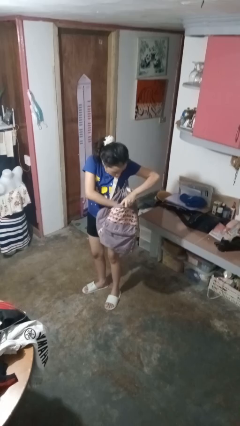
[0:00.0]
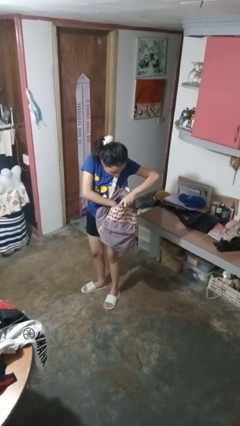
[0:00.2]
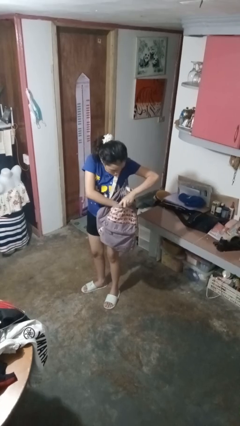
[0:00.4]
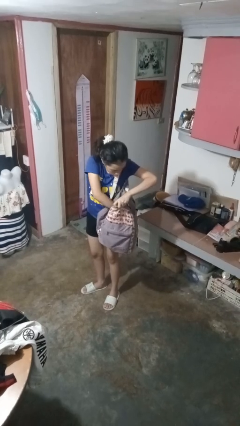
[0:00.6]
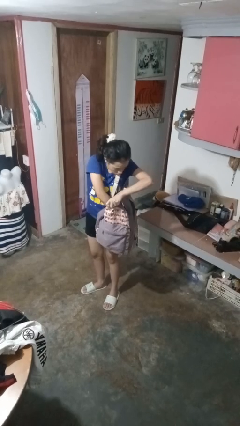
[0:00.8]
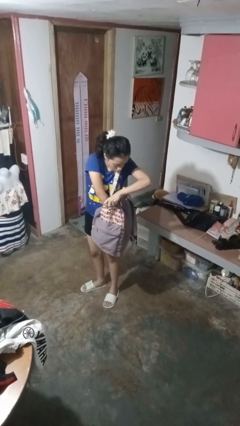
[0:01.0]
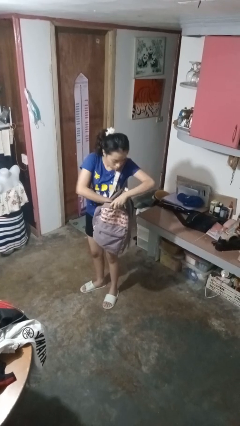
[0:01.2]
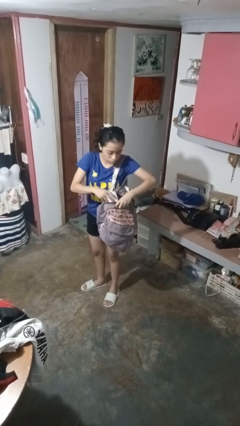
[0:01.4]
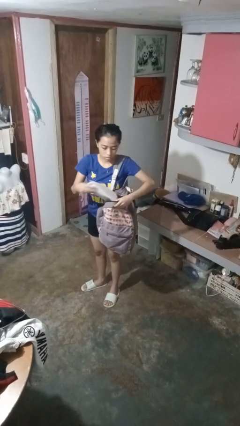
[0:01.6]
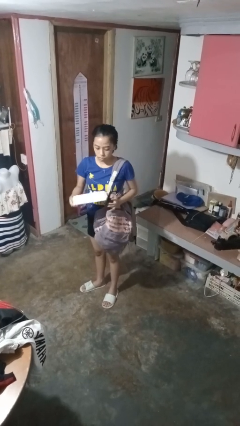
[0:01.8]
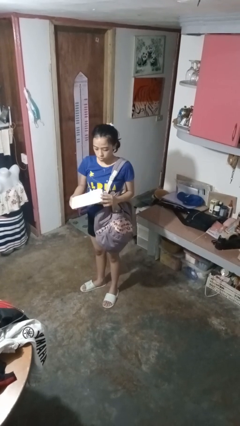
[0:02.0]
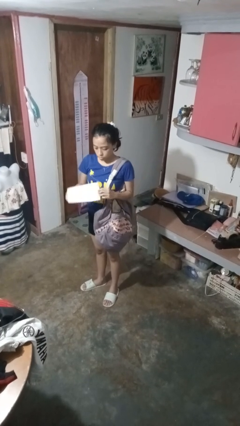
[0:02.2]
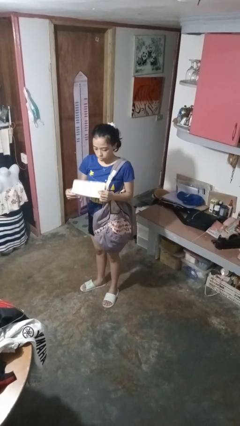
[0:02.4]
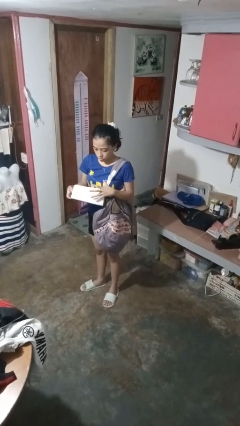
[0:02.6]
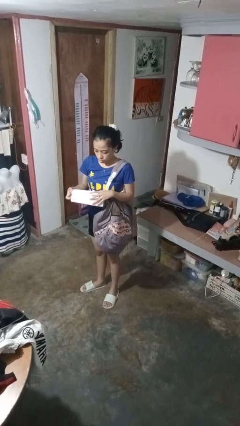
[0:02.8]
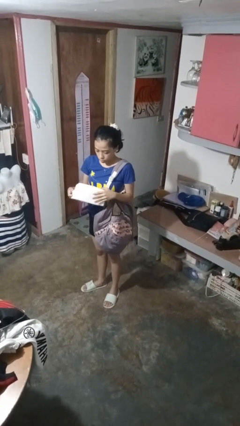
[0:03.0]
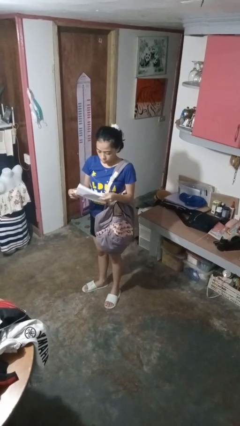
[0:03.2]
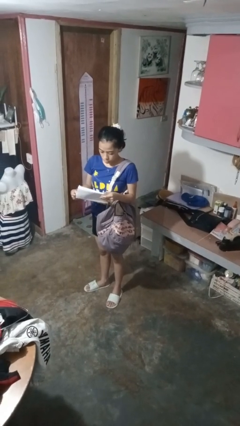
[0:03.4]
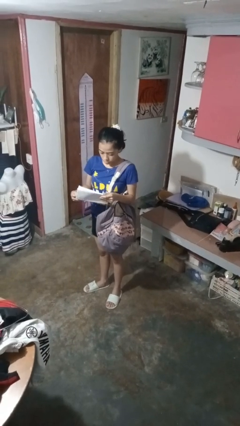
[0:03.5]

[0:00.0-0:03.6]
person takes object from backpack

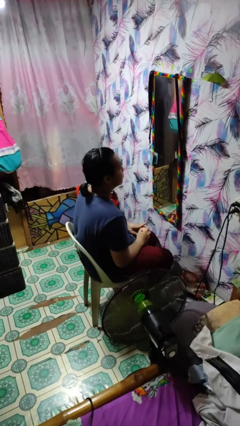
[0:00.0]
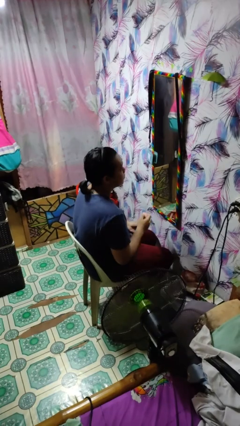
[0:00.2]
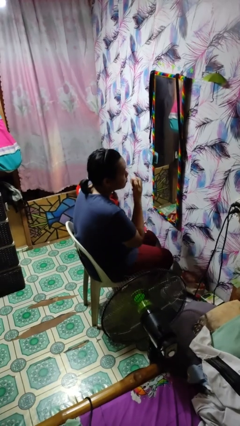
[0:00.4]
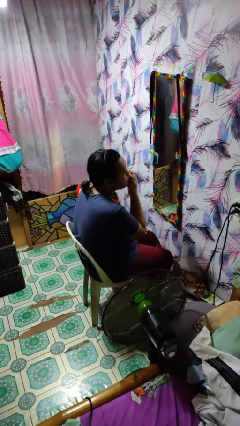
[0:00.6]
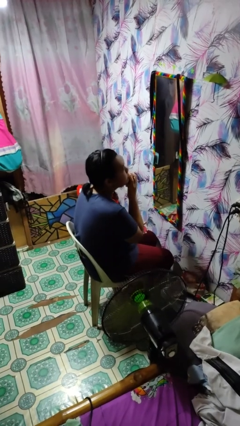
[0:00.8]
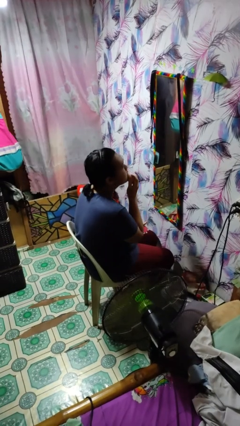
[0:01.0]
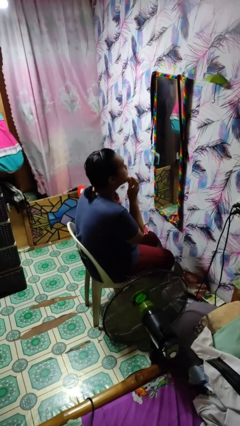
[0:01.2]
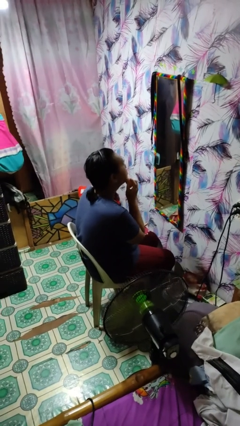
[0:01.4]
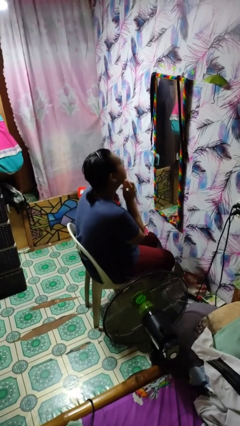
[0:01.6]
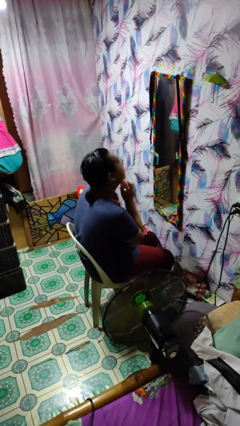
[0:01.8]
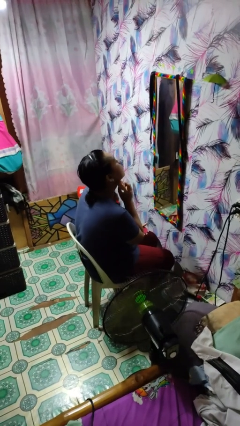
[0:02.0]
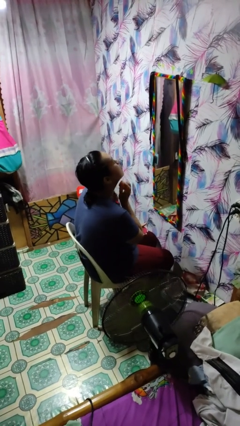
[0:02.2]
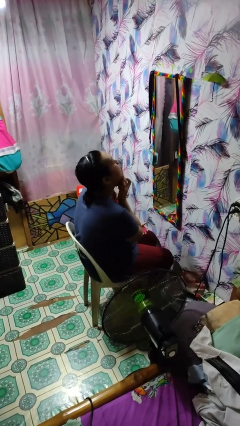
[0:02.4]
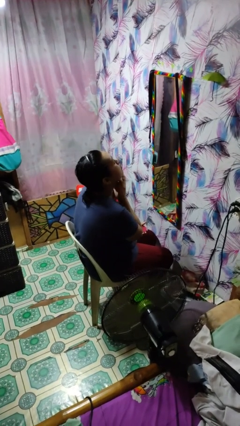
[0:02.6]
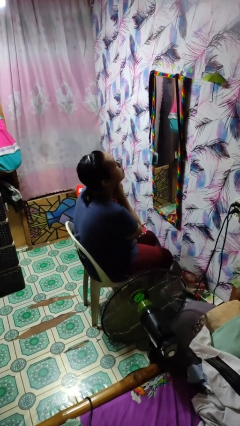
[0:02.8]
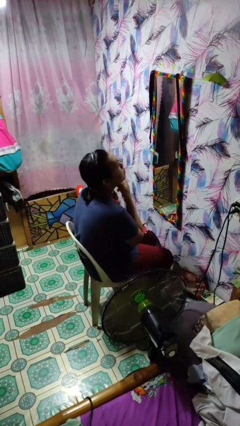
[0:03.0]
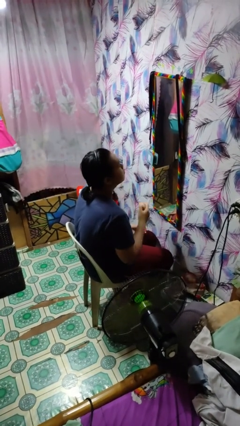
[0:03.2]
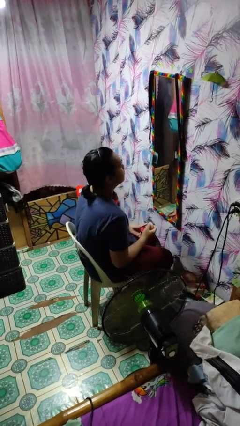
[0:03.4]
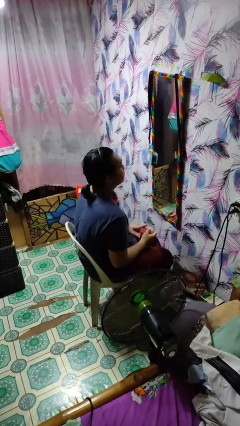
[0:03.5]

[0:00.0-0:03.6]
person applies foundation makeup

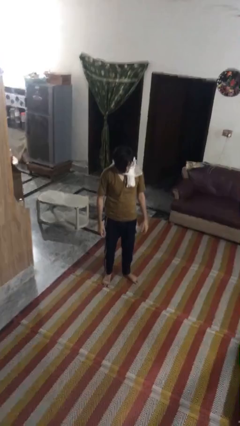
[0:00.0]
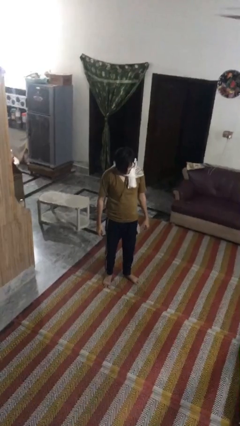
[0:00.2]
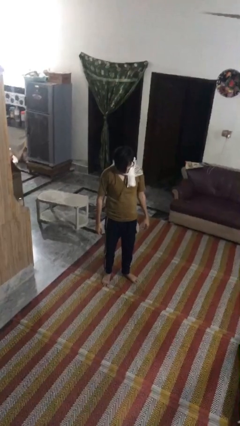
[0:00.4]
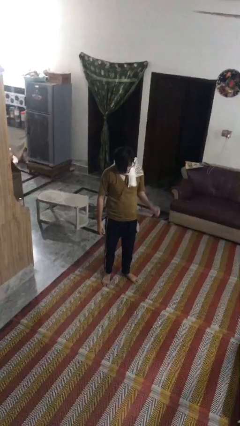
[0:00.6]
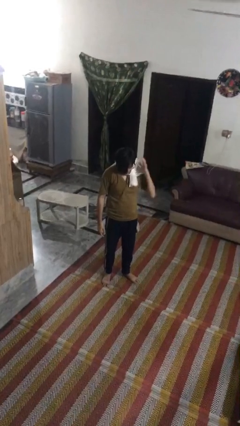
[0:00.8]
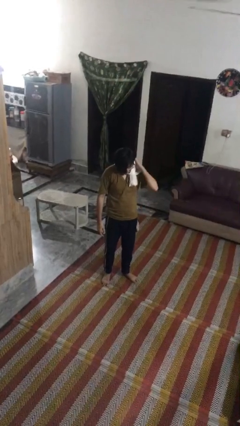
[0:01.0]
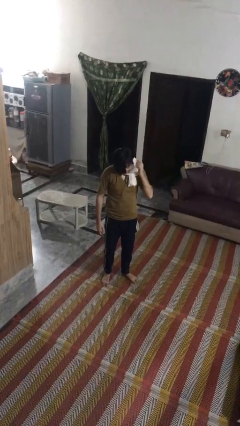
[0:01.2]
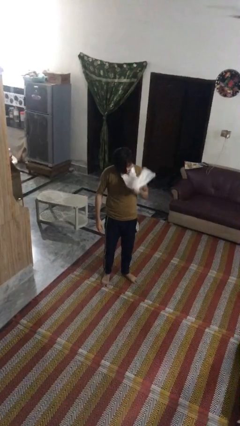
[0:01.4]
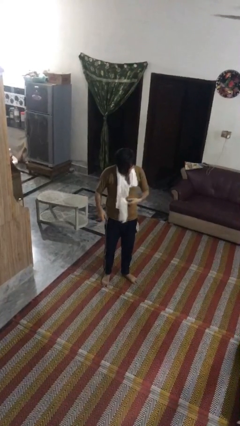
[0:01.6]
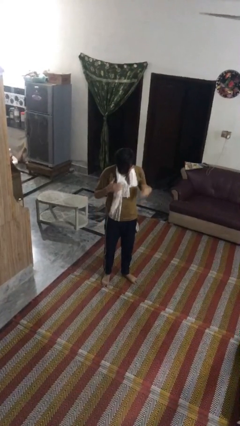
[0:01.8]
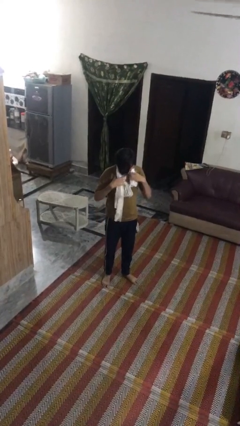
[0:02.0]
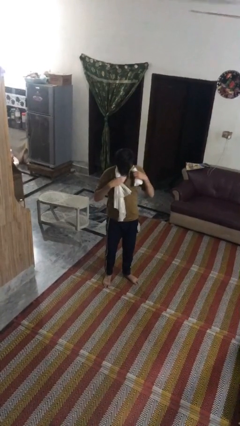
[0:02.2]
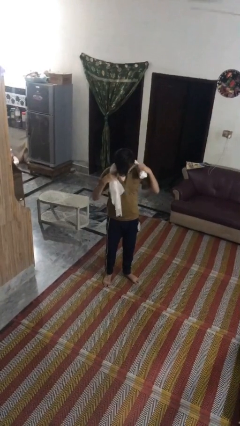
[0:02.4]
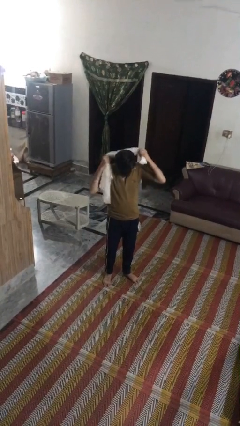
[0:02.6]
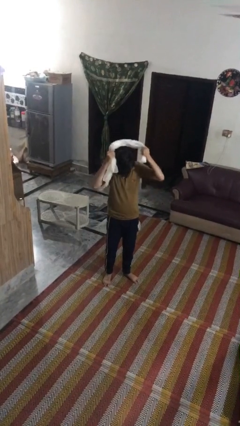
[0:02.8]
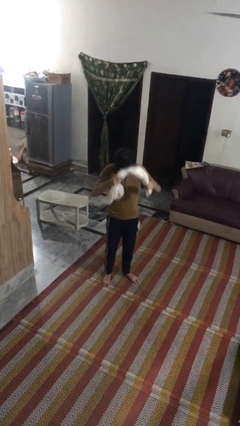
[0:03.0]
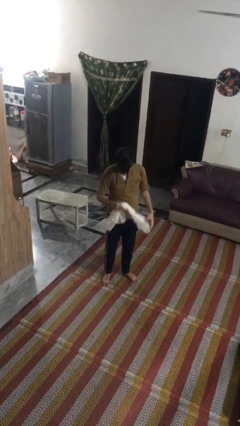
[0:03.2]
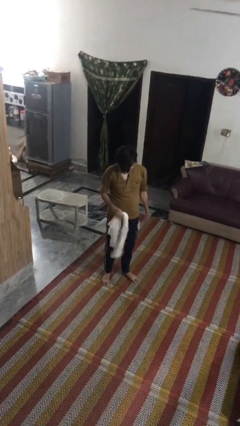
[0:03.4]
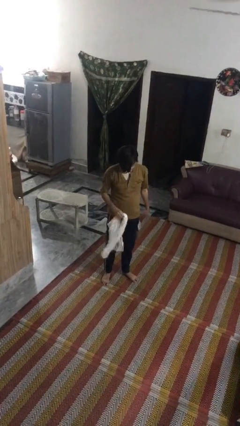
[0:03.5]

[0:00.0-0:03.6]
person takes off scarf

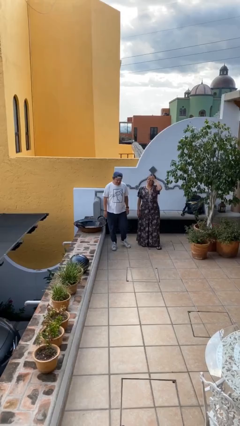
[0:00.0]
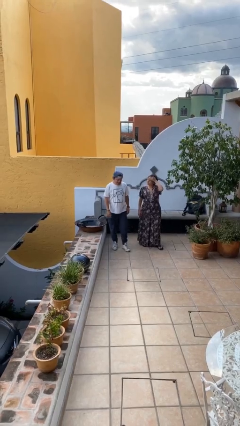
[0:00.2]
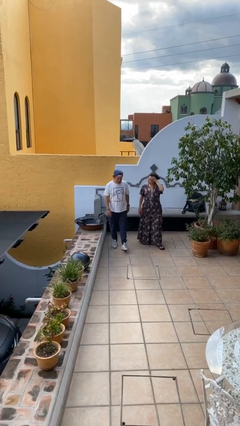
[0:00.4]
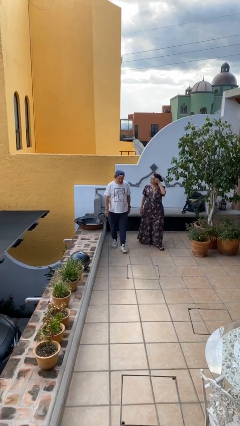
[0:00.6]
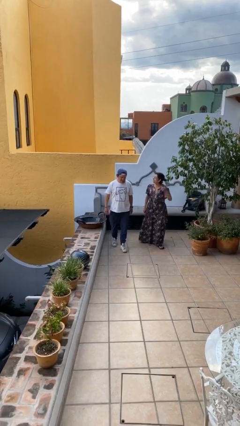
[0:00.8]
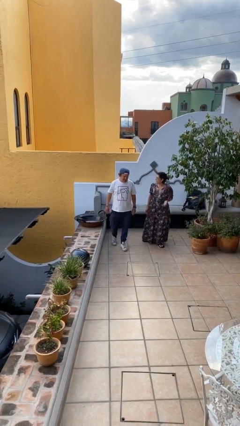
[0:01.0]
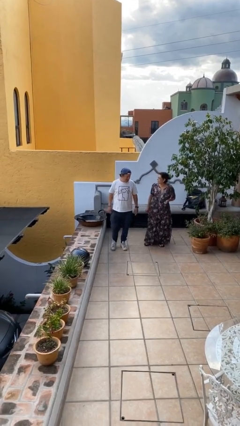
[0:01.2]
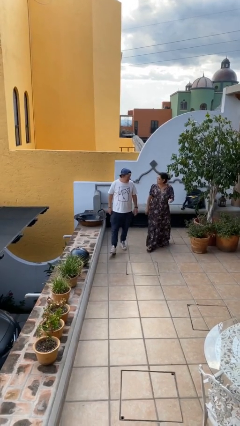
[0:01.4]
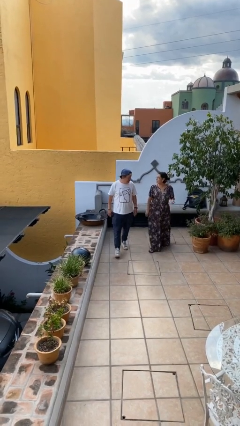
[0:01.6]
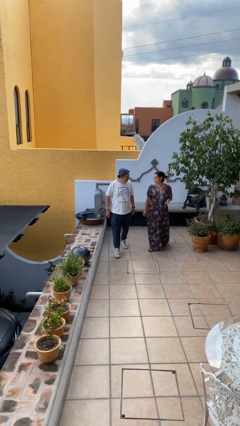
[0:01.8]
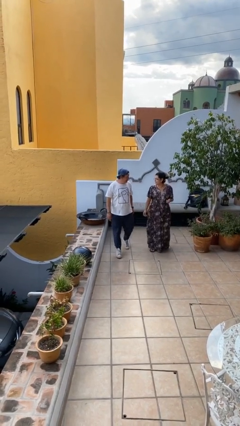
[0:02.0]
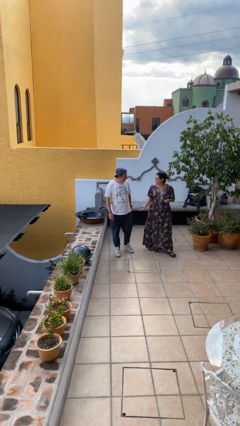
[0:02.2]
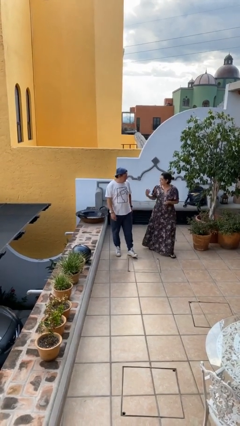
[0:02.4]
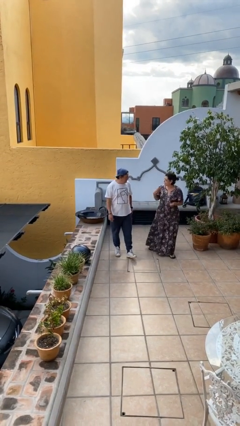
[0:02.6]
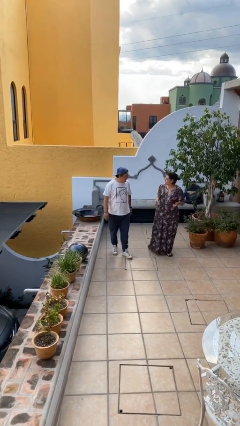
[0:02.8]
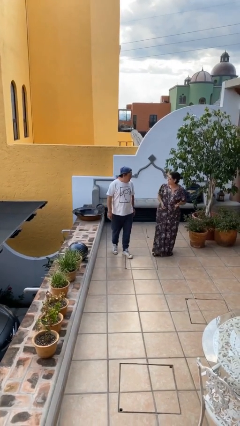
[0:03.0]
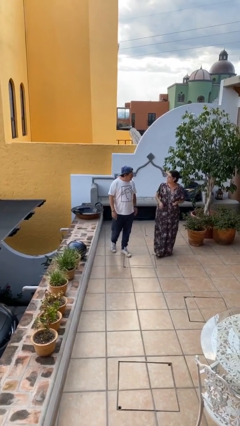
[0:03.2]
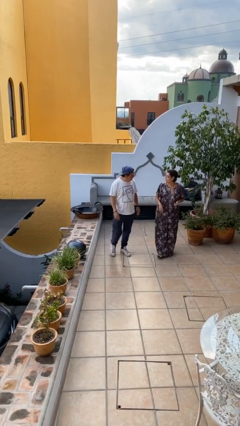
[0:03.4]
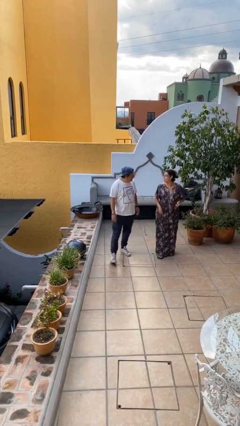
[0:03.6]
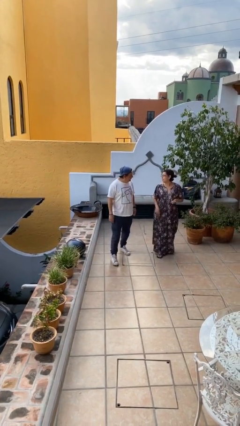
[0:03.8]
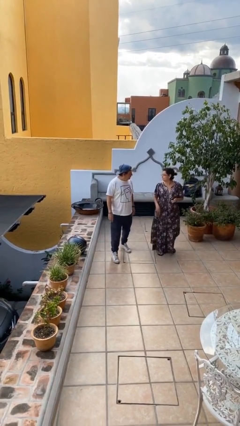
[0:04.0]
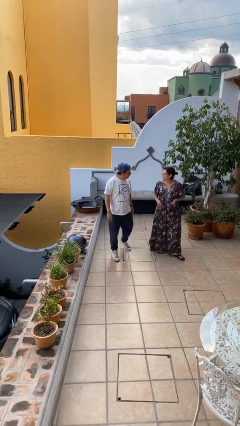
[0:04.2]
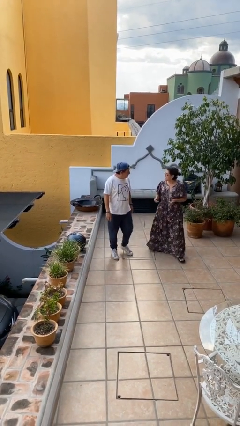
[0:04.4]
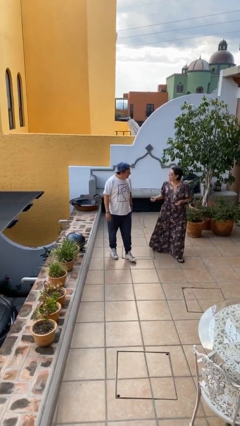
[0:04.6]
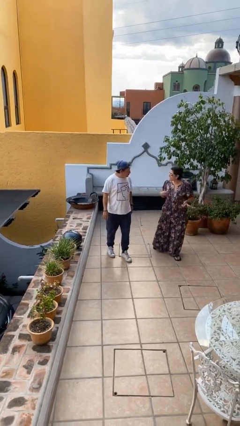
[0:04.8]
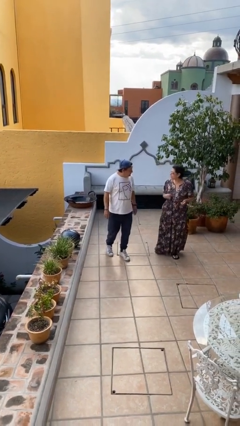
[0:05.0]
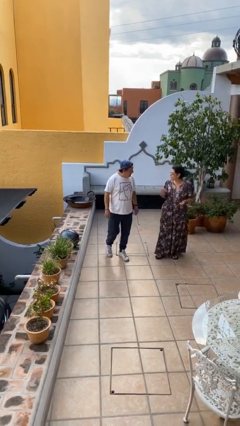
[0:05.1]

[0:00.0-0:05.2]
person talks to person

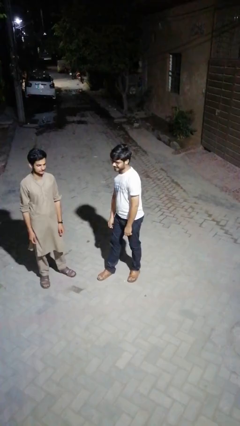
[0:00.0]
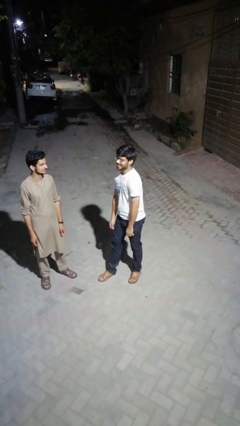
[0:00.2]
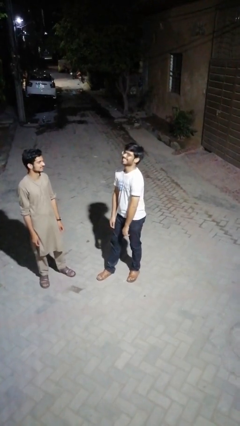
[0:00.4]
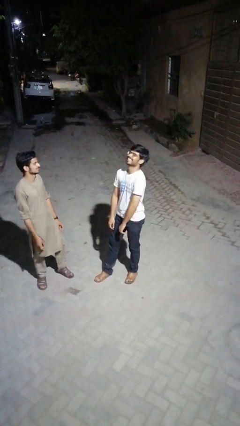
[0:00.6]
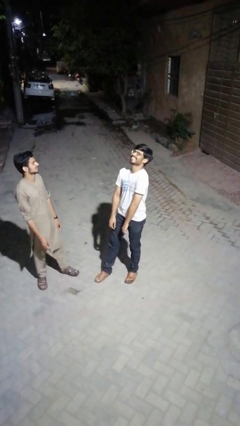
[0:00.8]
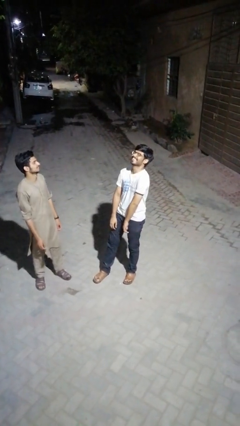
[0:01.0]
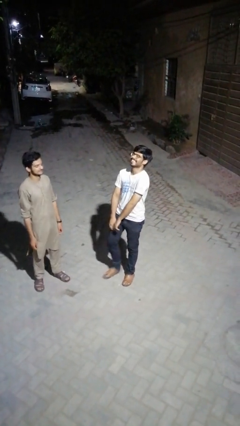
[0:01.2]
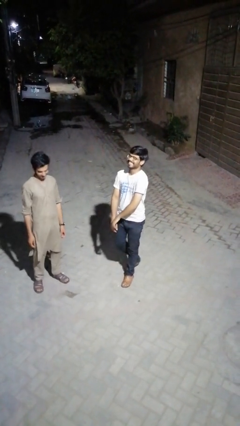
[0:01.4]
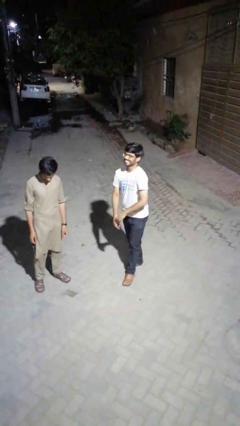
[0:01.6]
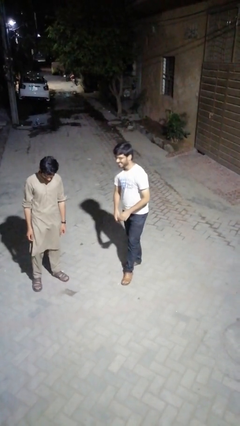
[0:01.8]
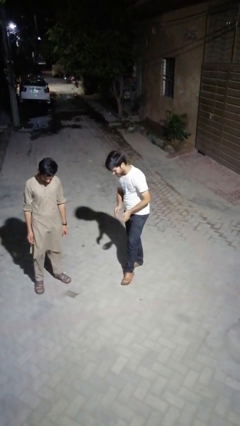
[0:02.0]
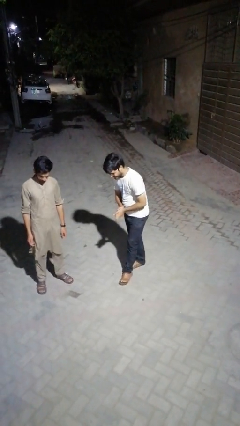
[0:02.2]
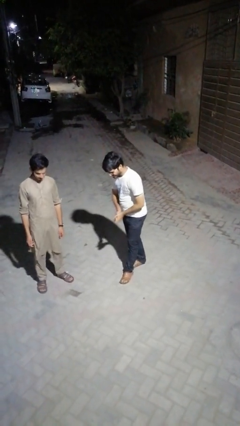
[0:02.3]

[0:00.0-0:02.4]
person laughs with person
